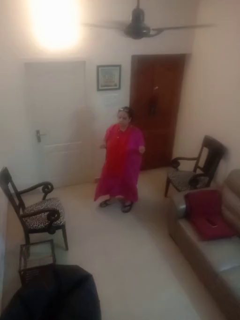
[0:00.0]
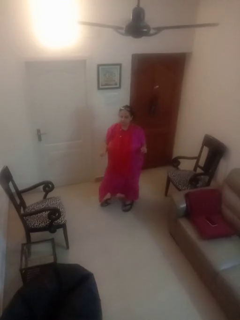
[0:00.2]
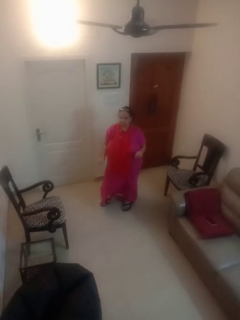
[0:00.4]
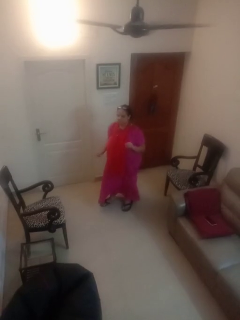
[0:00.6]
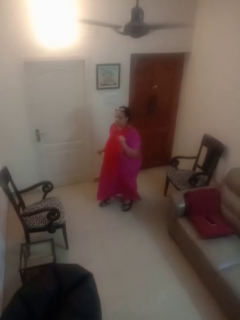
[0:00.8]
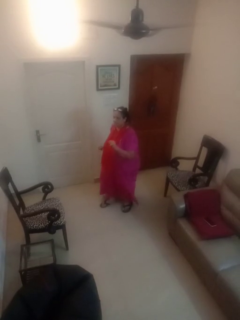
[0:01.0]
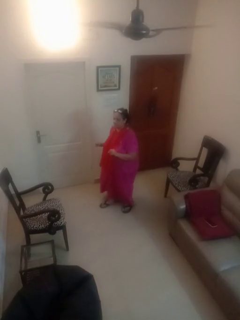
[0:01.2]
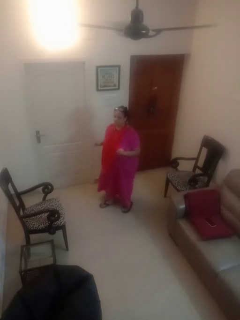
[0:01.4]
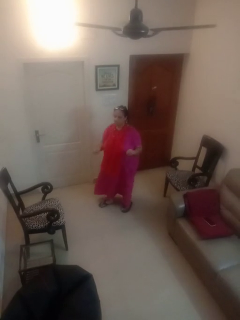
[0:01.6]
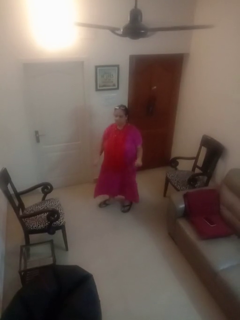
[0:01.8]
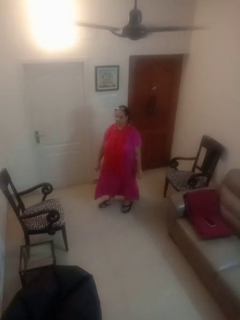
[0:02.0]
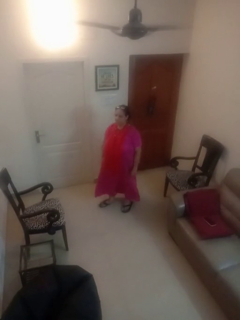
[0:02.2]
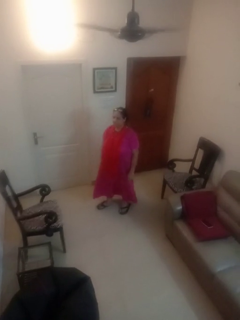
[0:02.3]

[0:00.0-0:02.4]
person dances in place

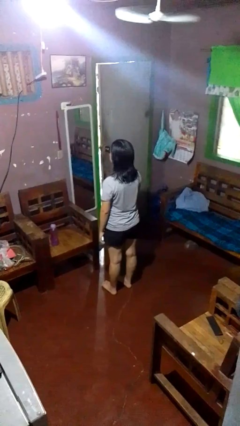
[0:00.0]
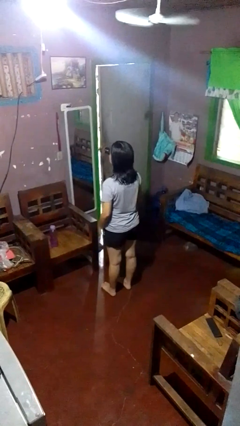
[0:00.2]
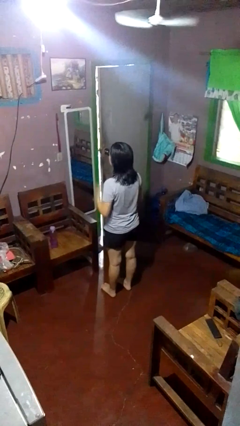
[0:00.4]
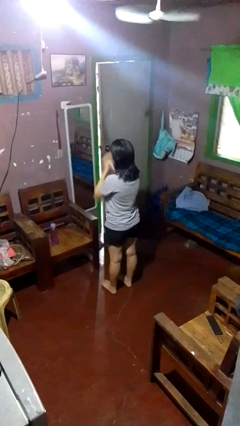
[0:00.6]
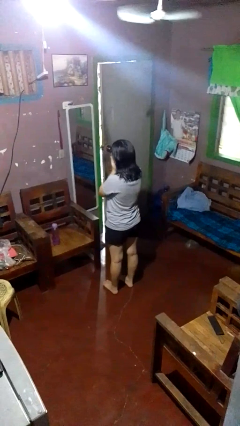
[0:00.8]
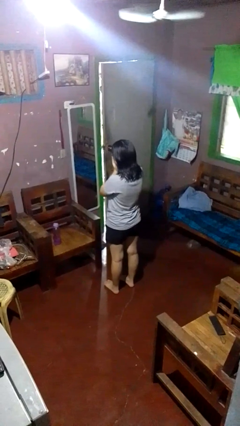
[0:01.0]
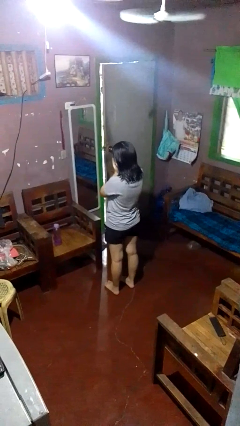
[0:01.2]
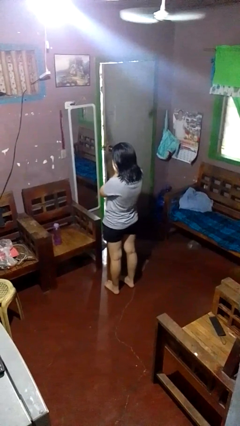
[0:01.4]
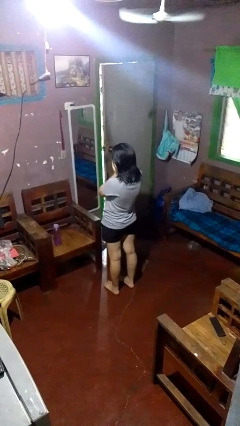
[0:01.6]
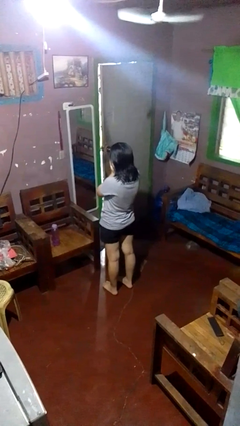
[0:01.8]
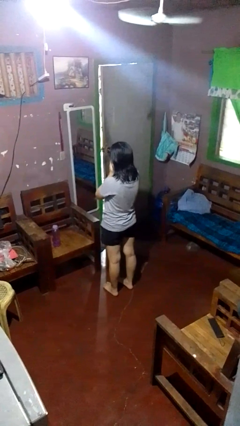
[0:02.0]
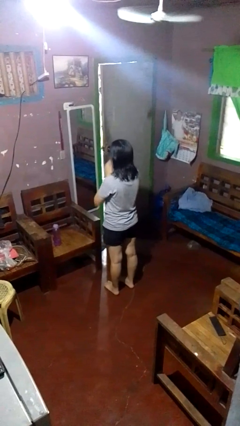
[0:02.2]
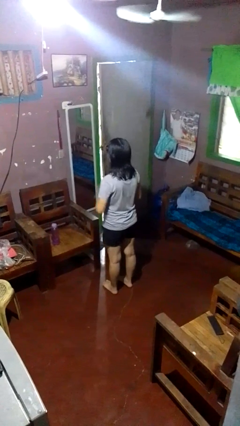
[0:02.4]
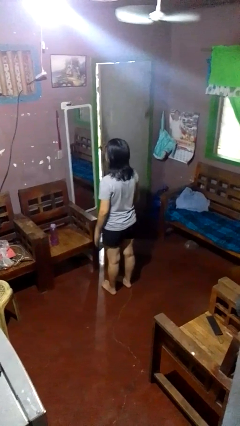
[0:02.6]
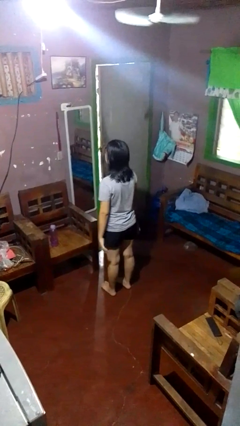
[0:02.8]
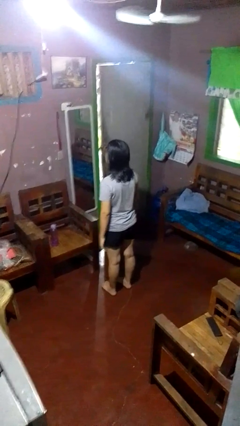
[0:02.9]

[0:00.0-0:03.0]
person covers face with hands

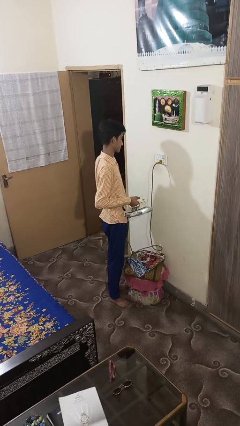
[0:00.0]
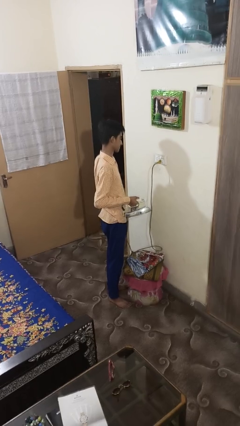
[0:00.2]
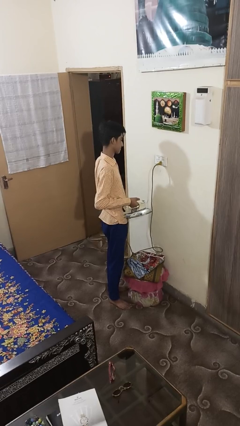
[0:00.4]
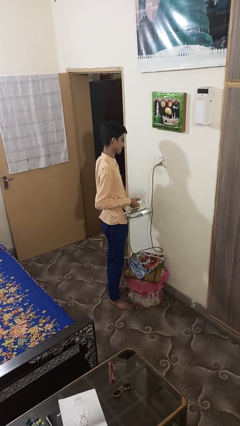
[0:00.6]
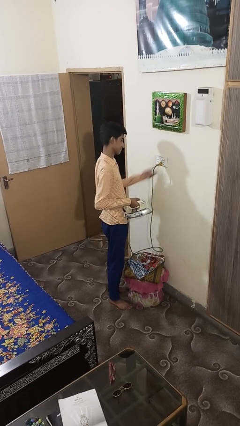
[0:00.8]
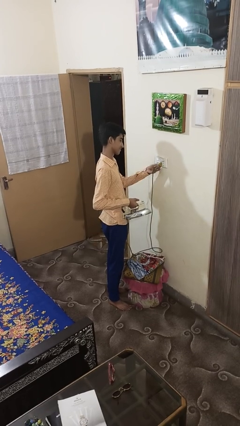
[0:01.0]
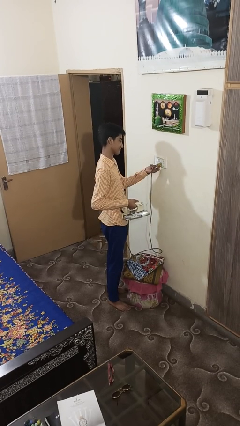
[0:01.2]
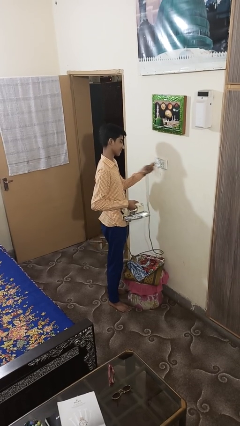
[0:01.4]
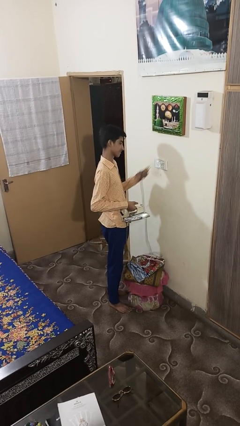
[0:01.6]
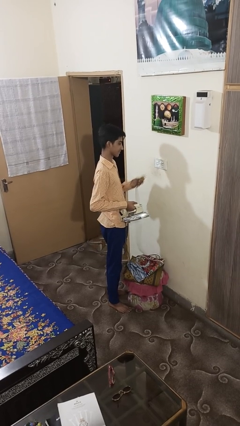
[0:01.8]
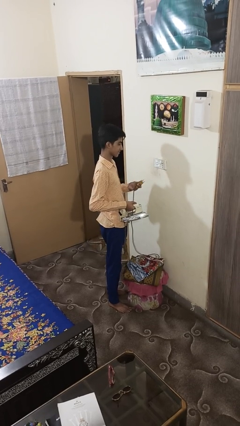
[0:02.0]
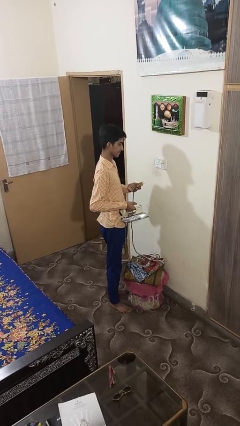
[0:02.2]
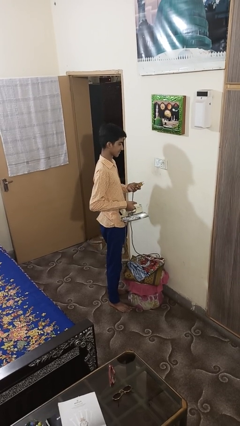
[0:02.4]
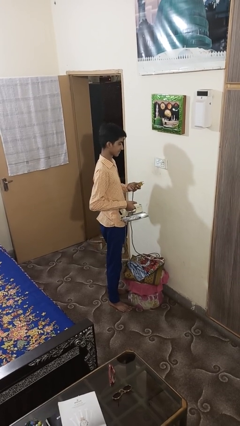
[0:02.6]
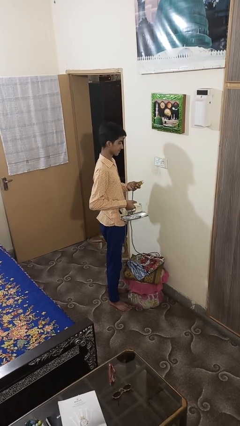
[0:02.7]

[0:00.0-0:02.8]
person unplugs from electrical socket

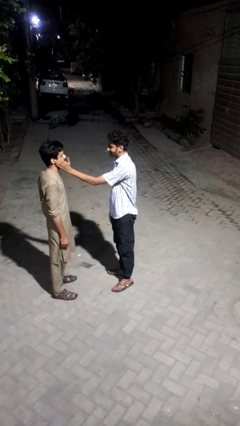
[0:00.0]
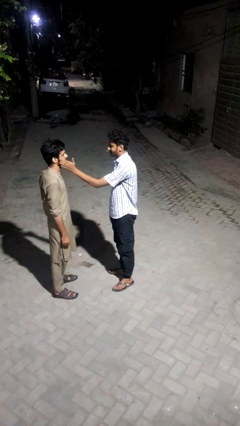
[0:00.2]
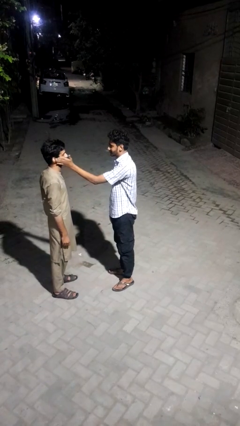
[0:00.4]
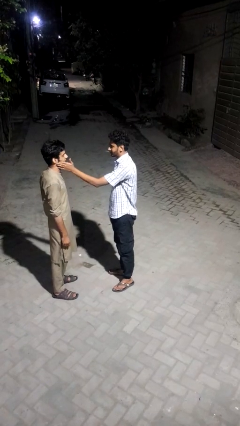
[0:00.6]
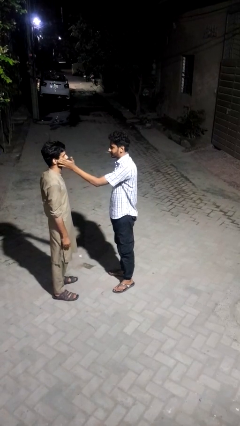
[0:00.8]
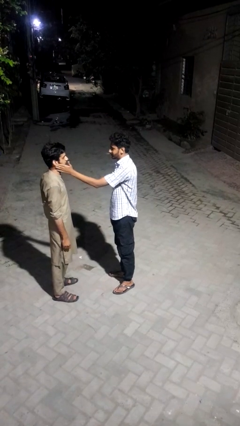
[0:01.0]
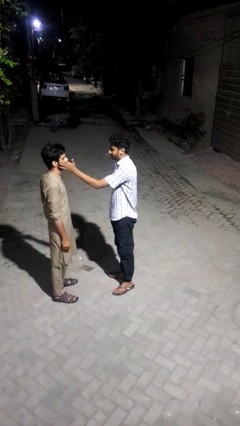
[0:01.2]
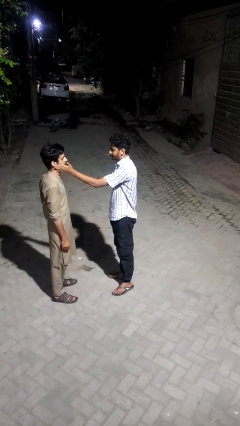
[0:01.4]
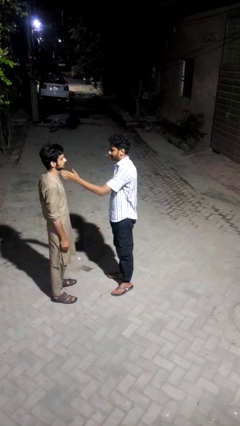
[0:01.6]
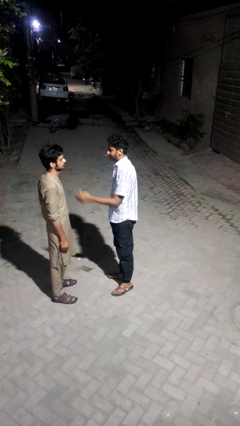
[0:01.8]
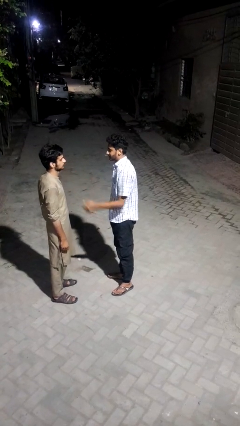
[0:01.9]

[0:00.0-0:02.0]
person touches face of person

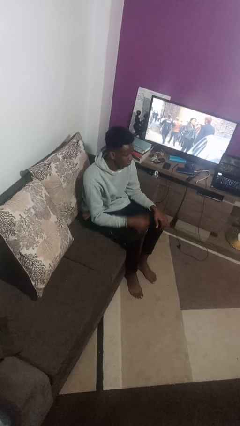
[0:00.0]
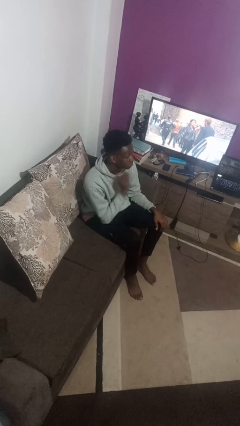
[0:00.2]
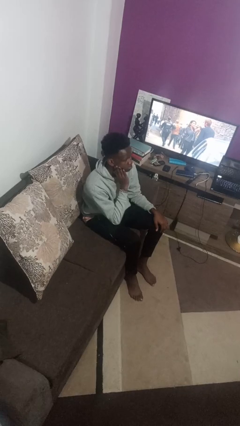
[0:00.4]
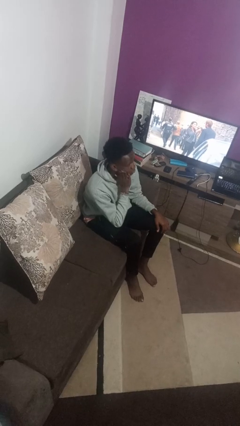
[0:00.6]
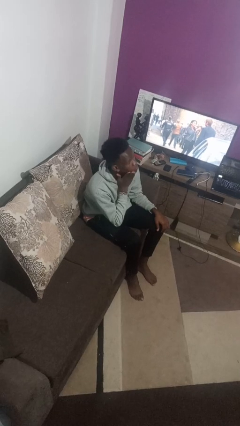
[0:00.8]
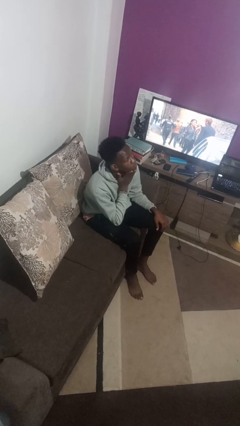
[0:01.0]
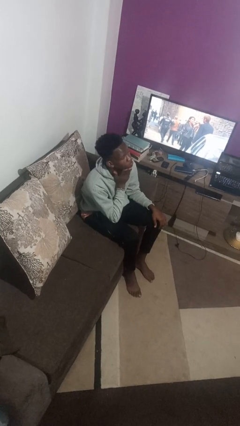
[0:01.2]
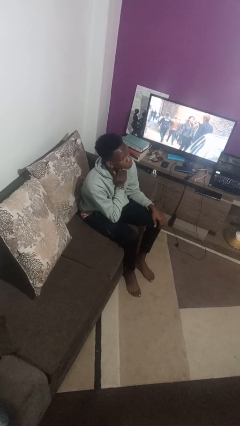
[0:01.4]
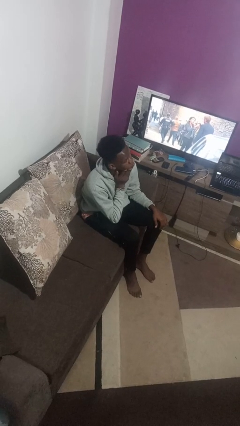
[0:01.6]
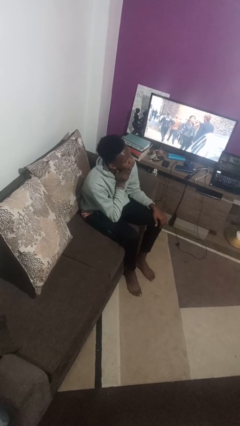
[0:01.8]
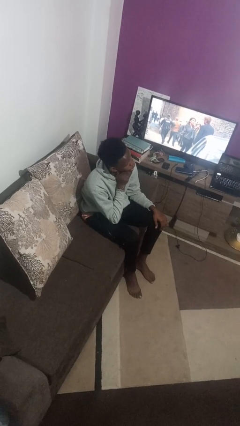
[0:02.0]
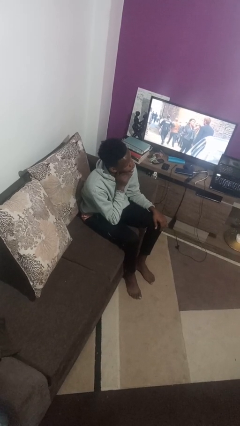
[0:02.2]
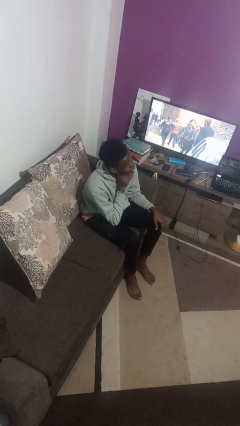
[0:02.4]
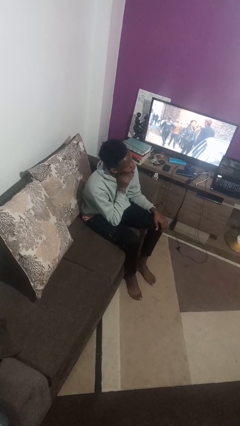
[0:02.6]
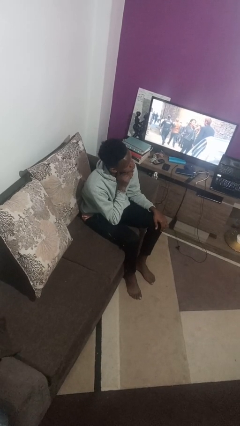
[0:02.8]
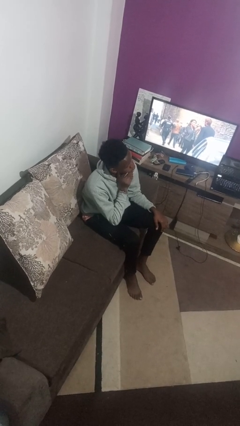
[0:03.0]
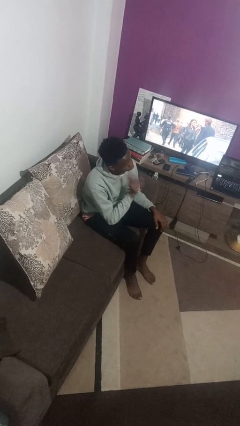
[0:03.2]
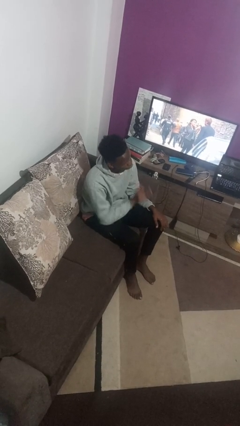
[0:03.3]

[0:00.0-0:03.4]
person strokes chin

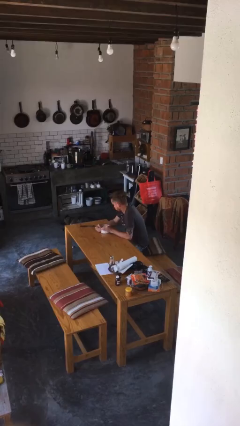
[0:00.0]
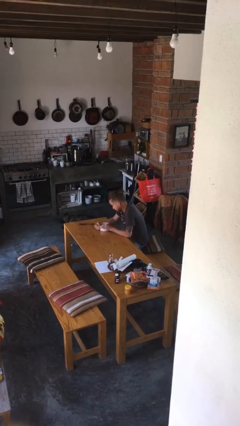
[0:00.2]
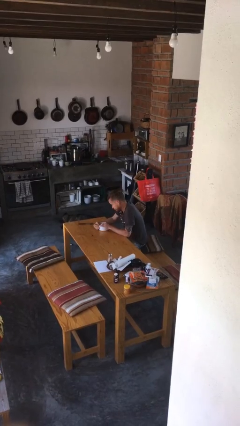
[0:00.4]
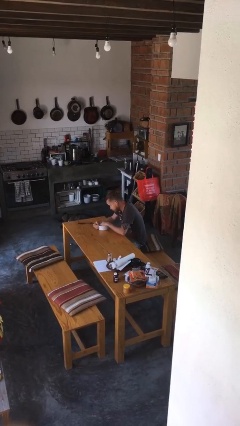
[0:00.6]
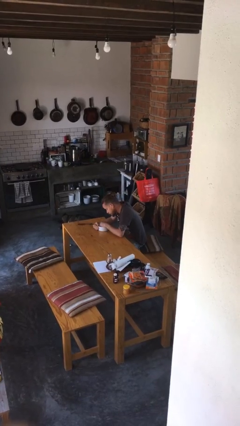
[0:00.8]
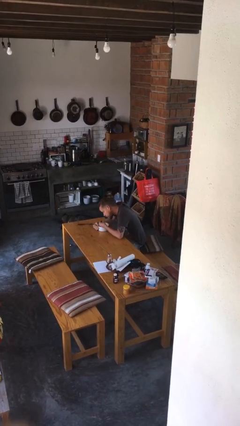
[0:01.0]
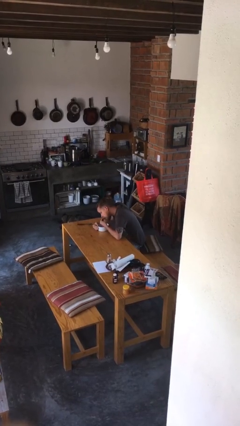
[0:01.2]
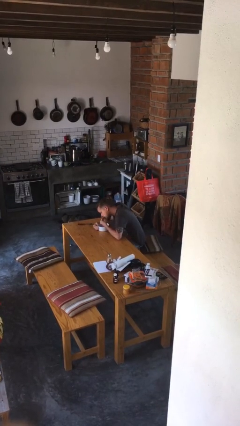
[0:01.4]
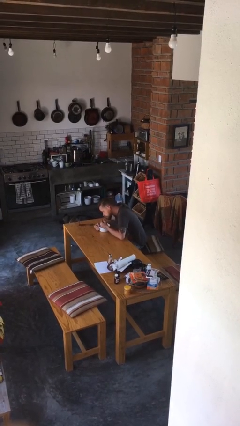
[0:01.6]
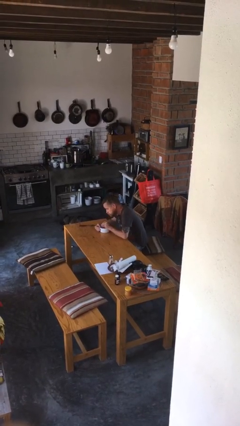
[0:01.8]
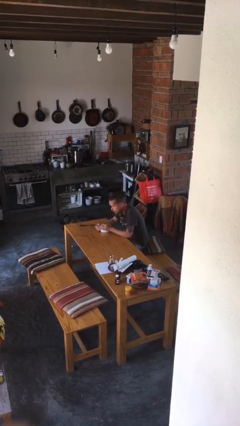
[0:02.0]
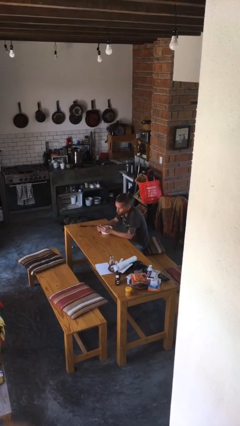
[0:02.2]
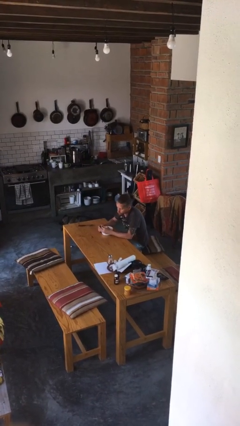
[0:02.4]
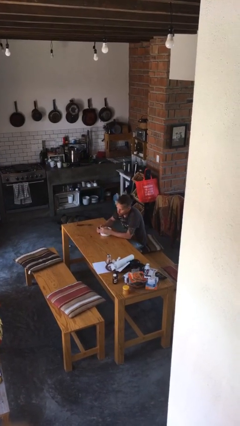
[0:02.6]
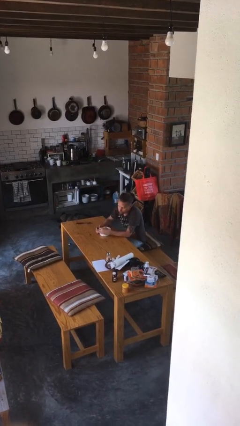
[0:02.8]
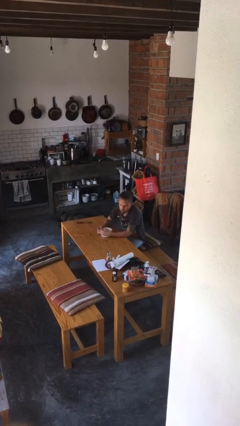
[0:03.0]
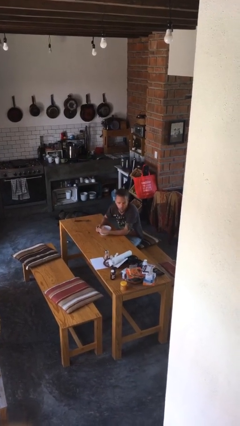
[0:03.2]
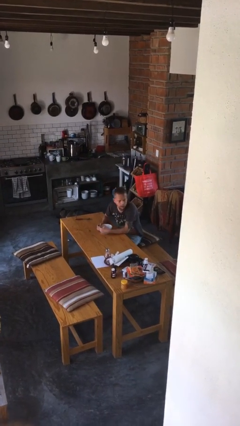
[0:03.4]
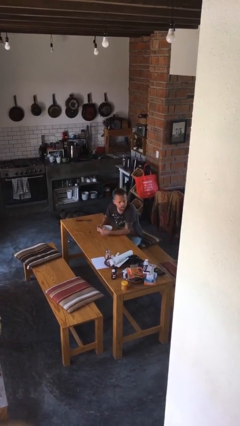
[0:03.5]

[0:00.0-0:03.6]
person eats with hands

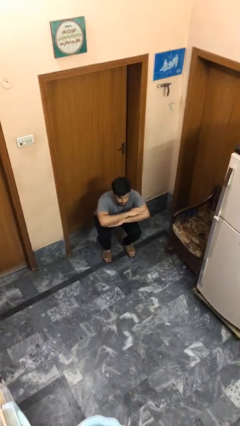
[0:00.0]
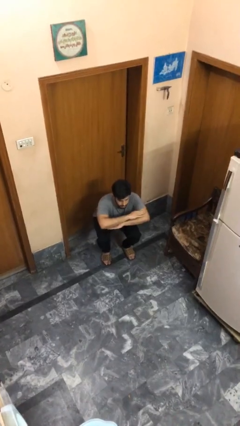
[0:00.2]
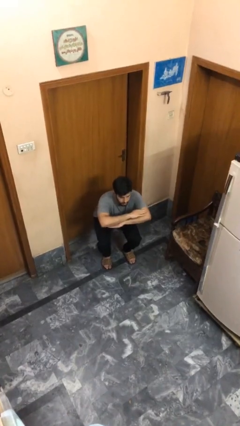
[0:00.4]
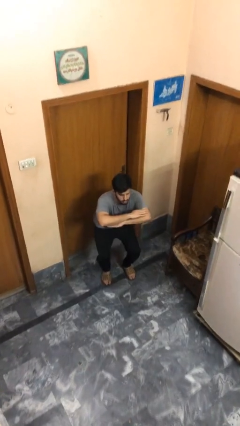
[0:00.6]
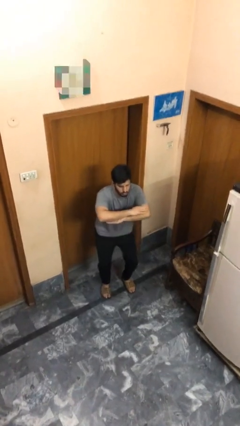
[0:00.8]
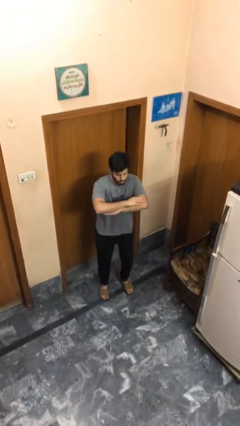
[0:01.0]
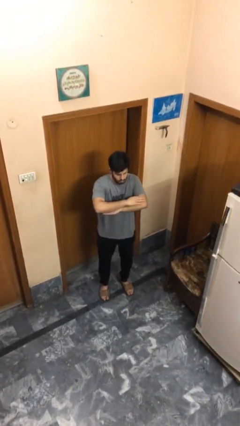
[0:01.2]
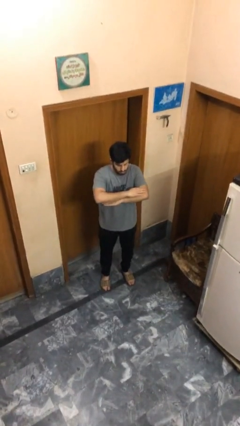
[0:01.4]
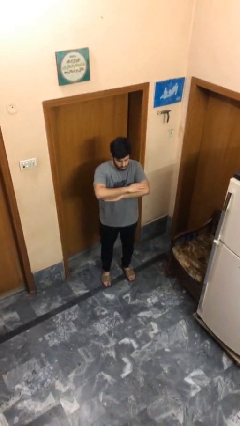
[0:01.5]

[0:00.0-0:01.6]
person stands up
